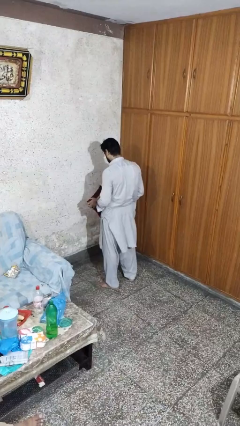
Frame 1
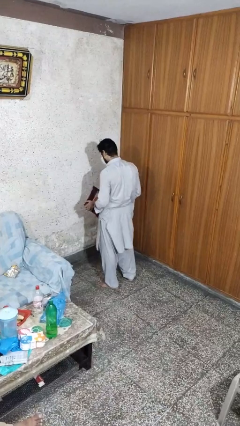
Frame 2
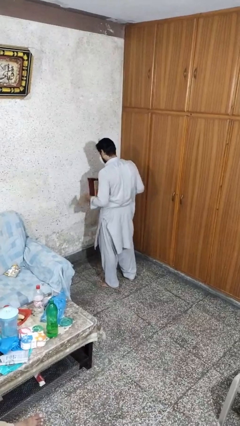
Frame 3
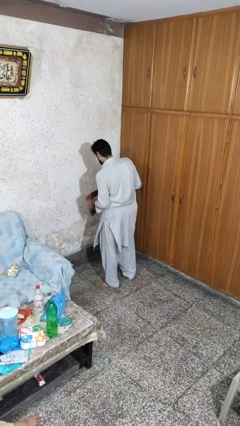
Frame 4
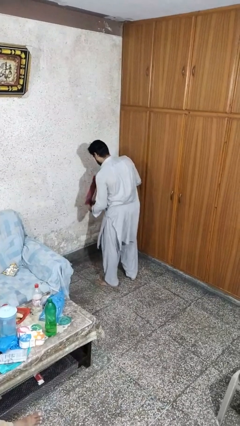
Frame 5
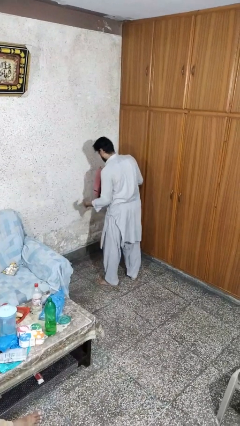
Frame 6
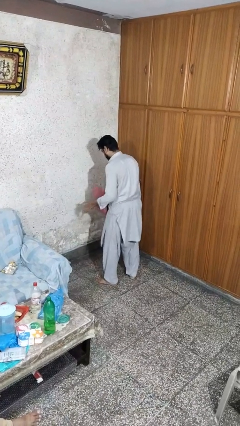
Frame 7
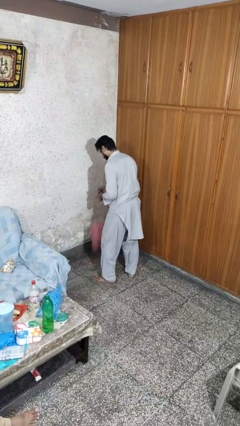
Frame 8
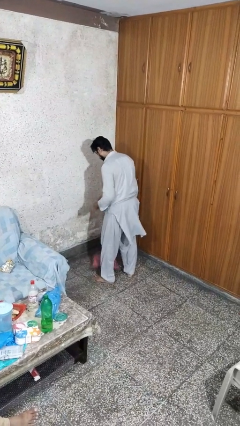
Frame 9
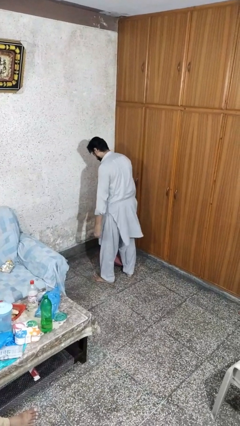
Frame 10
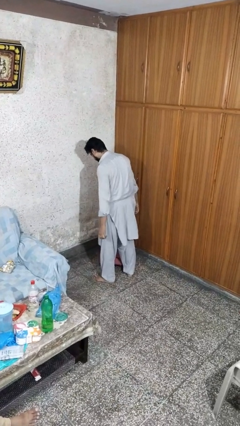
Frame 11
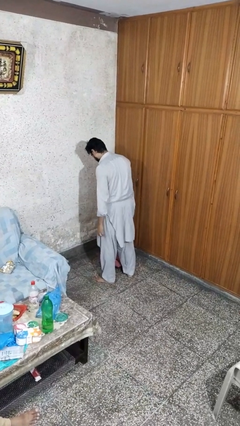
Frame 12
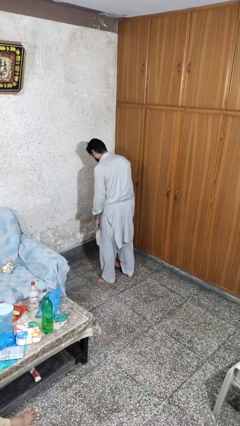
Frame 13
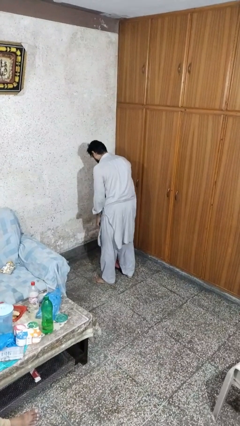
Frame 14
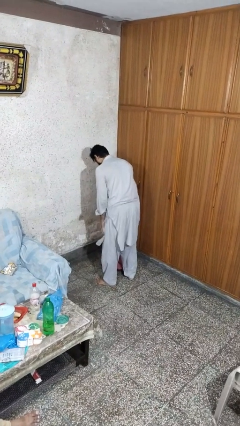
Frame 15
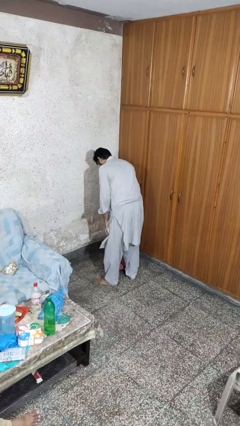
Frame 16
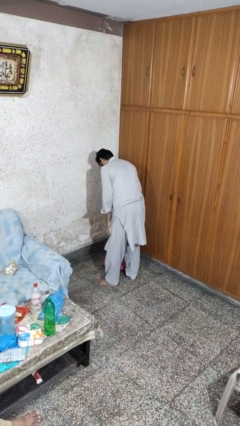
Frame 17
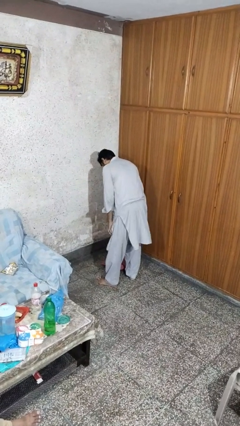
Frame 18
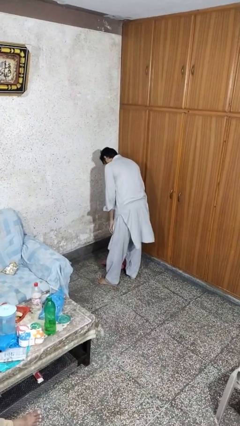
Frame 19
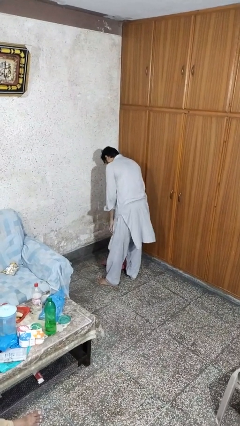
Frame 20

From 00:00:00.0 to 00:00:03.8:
person drops object

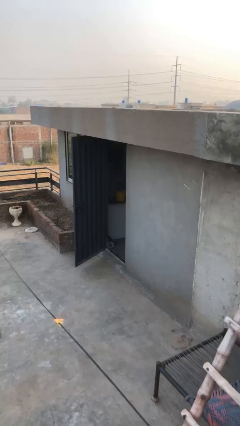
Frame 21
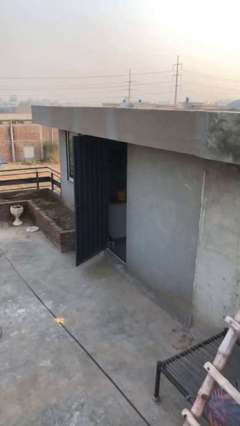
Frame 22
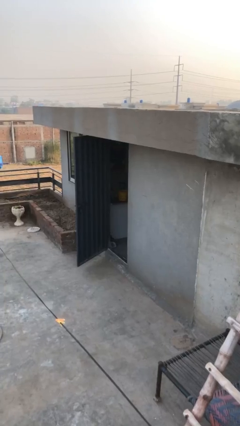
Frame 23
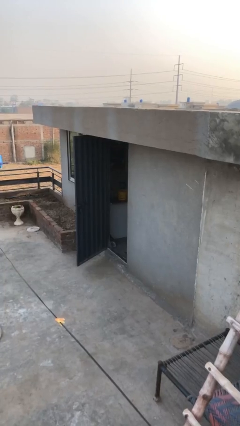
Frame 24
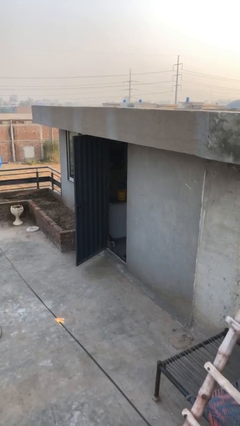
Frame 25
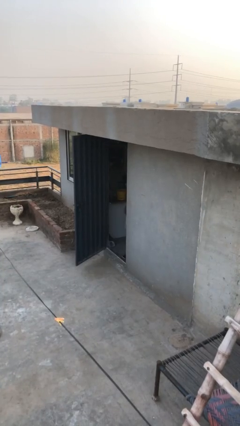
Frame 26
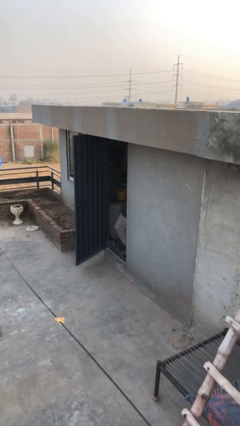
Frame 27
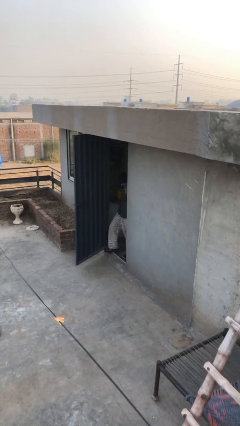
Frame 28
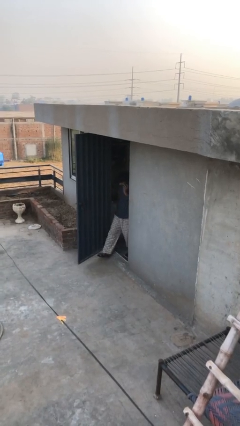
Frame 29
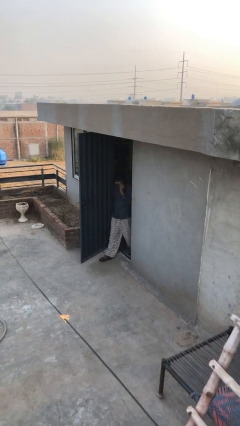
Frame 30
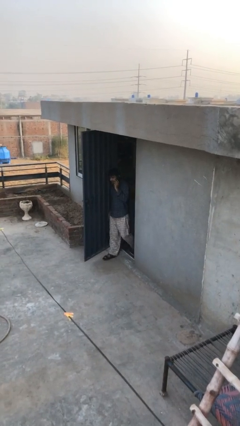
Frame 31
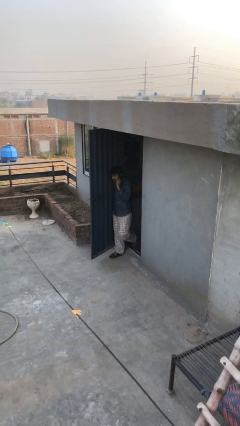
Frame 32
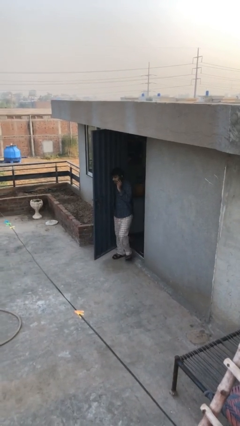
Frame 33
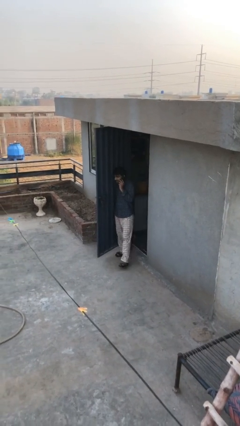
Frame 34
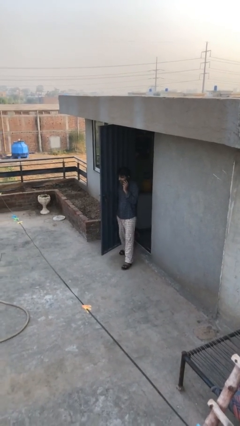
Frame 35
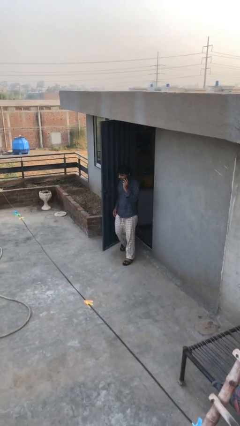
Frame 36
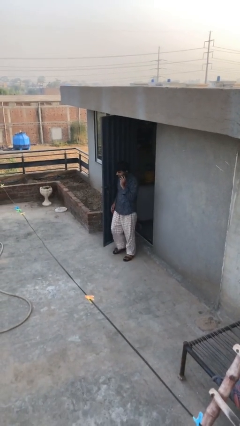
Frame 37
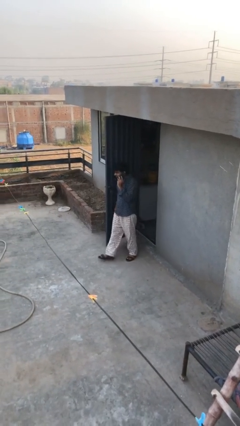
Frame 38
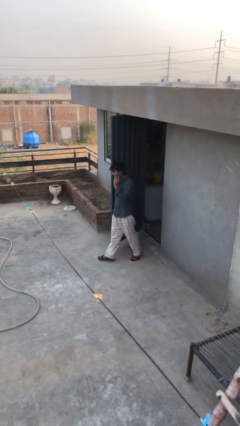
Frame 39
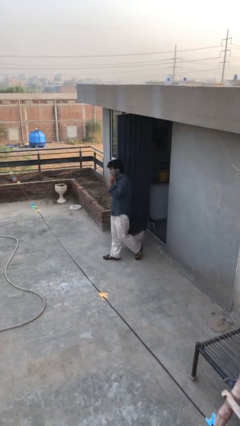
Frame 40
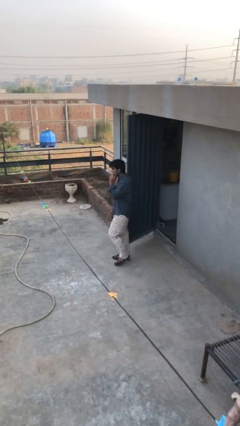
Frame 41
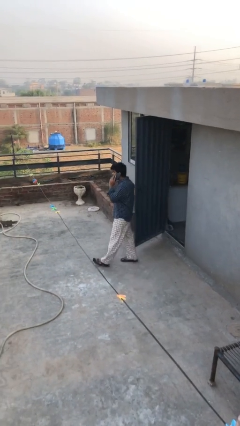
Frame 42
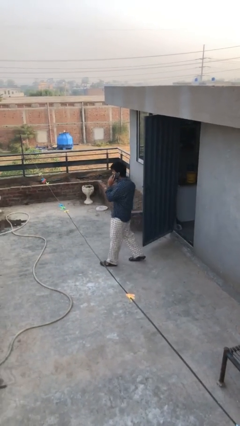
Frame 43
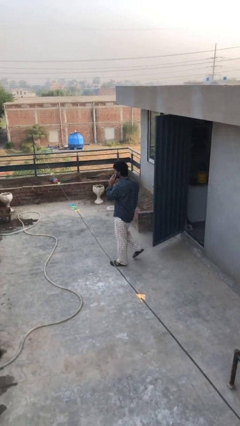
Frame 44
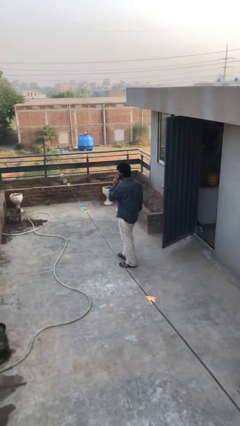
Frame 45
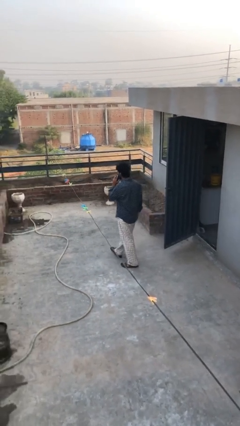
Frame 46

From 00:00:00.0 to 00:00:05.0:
person enters scene through structure

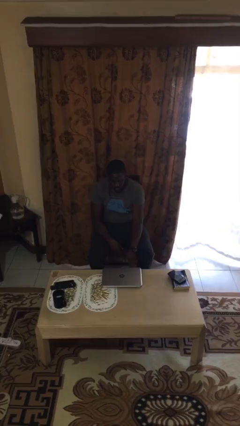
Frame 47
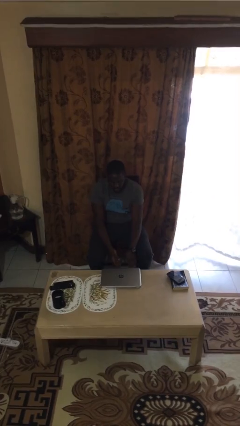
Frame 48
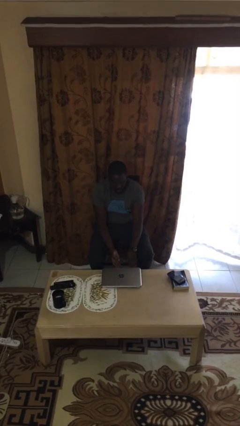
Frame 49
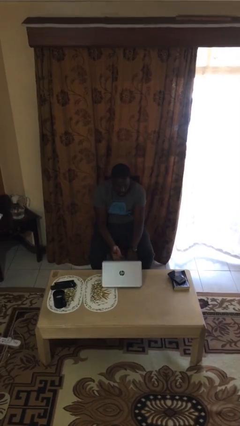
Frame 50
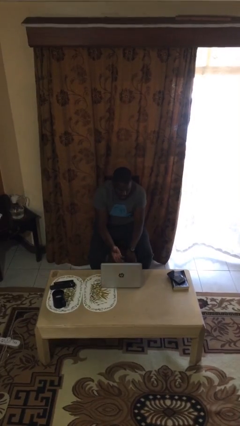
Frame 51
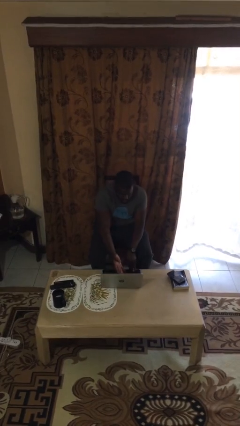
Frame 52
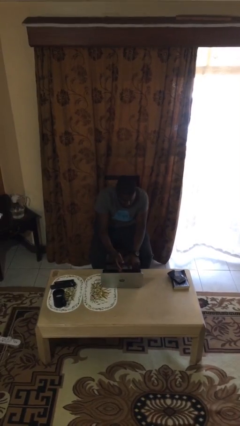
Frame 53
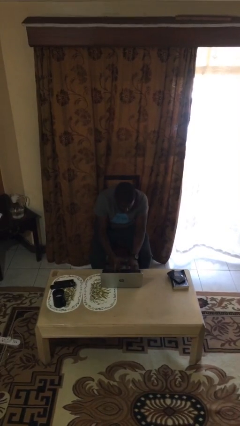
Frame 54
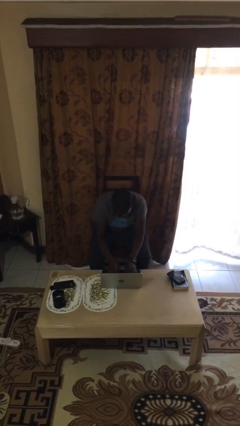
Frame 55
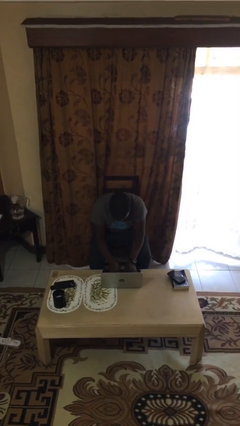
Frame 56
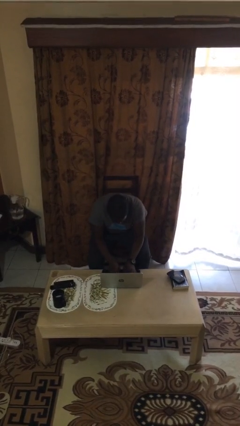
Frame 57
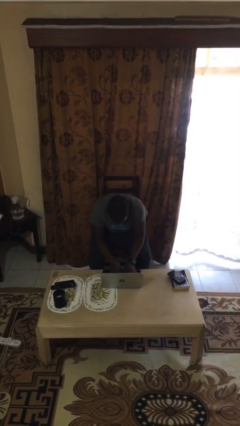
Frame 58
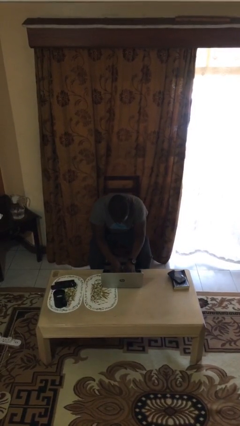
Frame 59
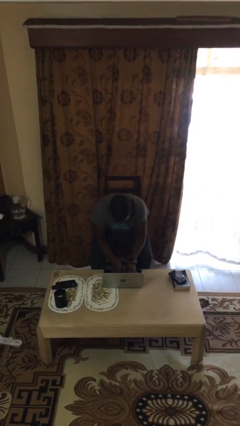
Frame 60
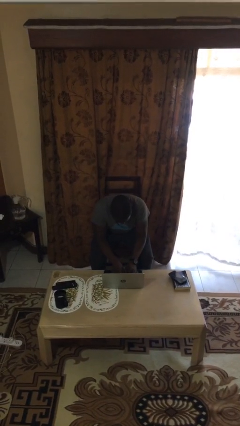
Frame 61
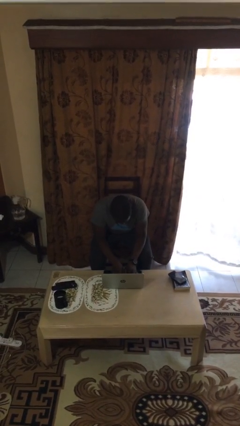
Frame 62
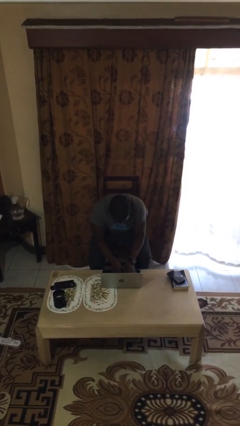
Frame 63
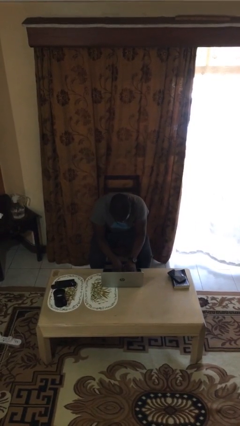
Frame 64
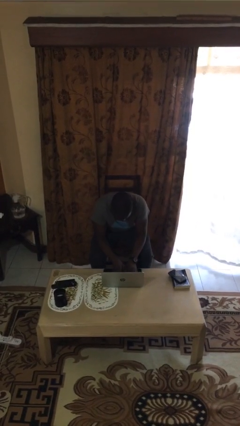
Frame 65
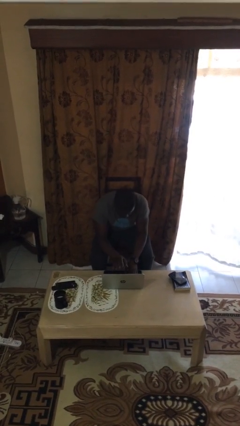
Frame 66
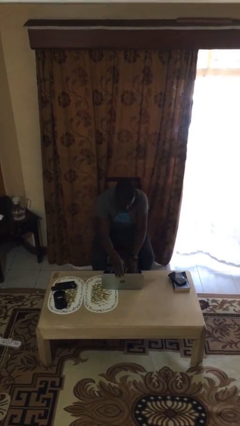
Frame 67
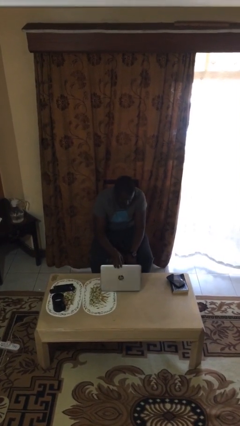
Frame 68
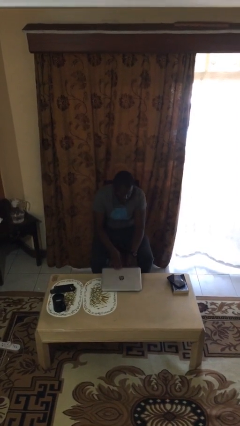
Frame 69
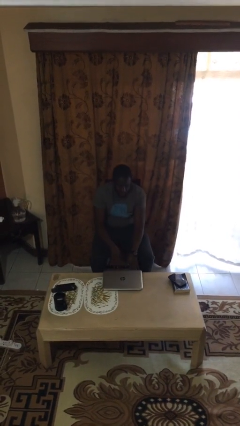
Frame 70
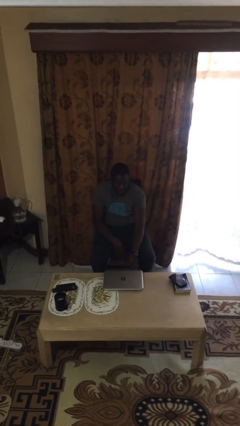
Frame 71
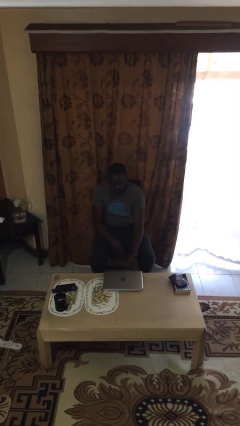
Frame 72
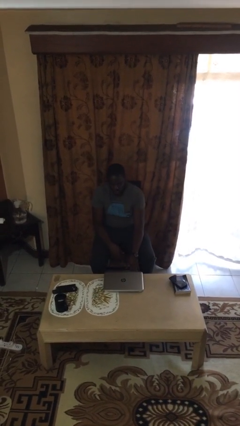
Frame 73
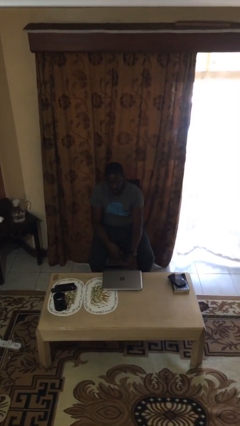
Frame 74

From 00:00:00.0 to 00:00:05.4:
person interacts with laptop

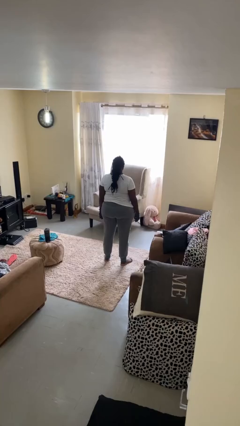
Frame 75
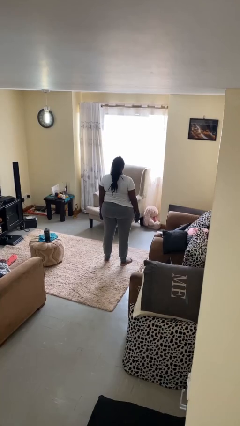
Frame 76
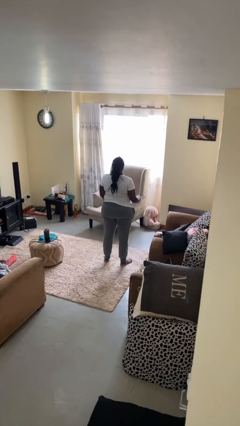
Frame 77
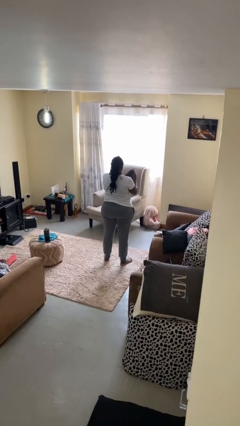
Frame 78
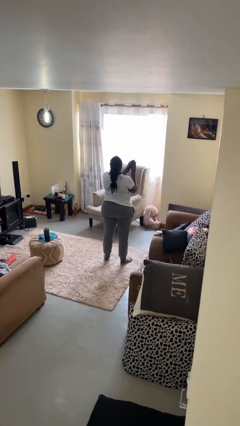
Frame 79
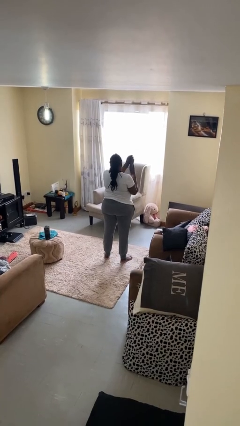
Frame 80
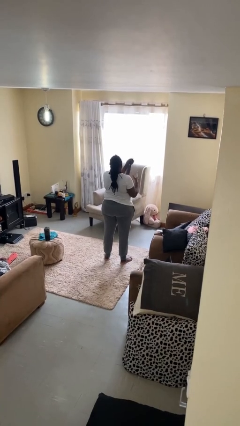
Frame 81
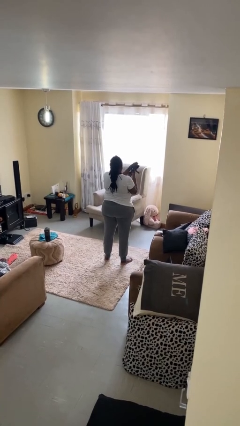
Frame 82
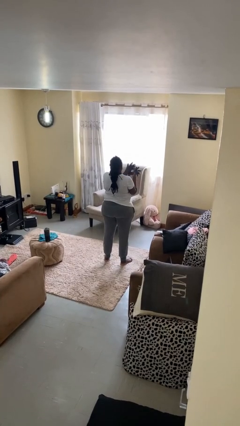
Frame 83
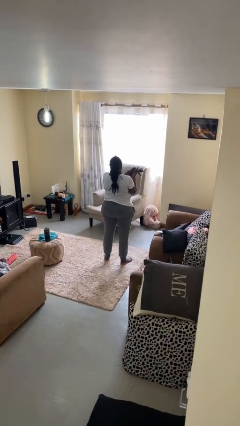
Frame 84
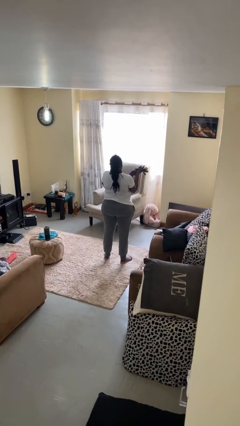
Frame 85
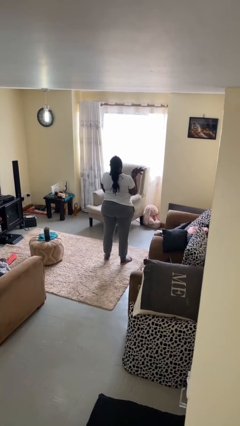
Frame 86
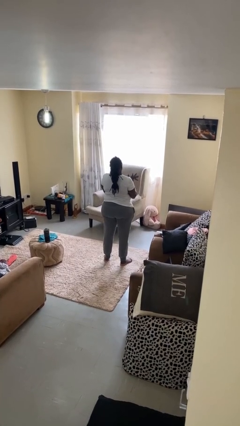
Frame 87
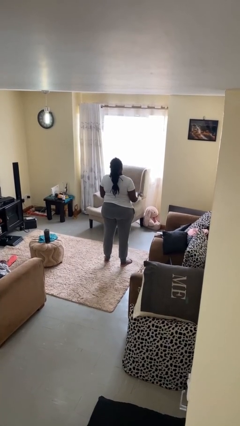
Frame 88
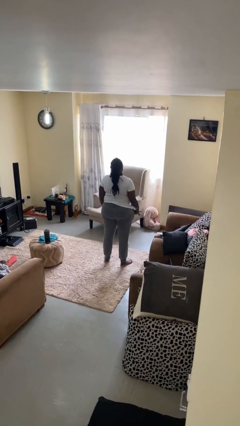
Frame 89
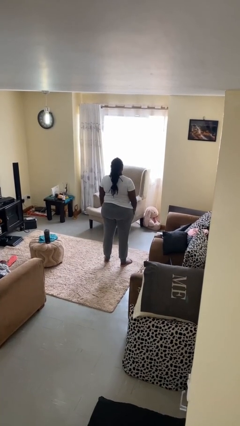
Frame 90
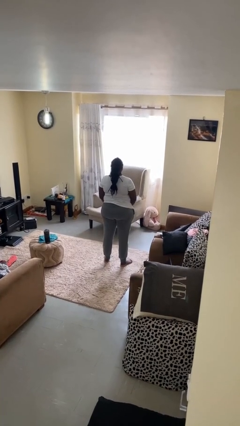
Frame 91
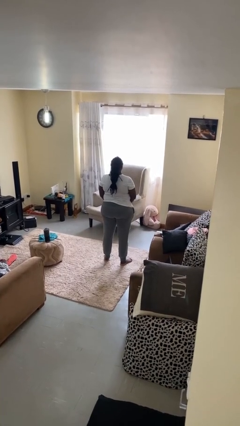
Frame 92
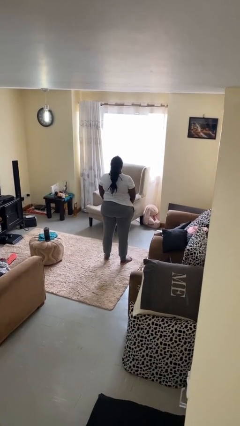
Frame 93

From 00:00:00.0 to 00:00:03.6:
person takes off gloves
